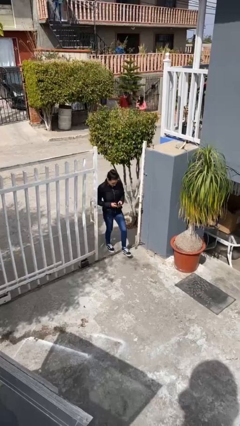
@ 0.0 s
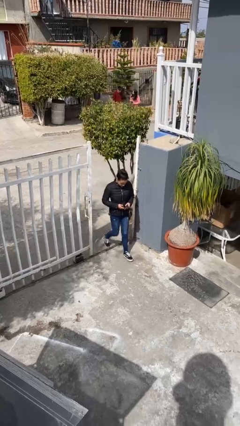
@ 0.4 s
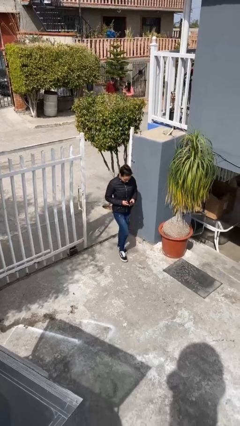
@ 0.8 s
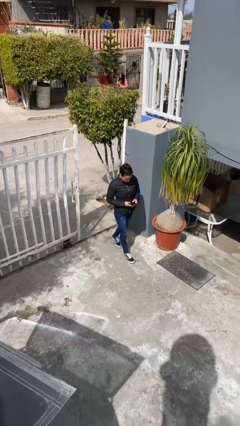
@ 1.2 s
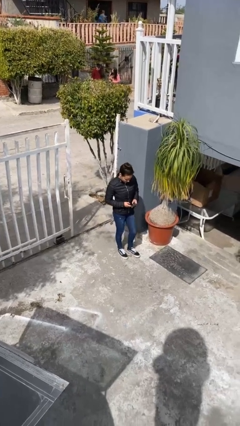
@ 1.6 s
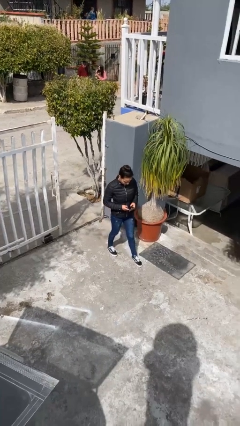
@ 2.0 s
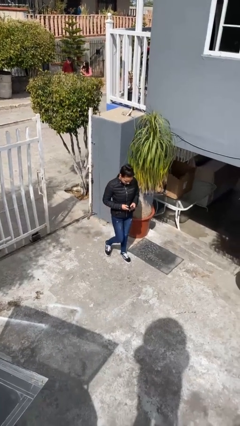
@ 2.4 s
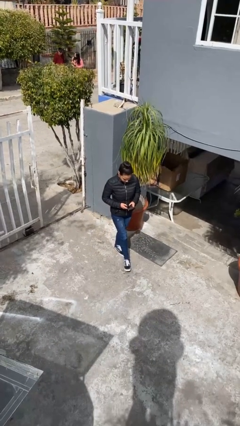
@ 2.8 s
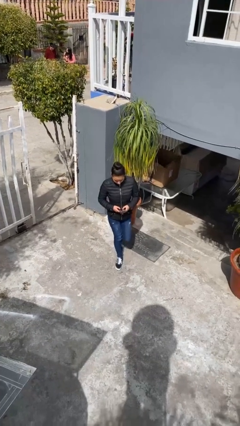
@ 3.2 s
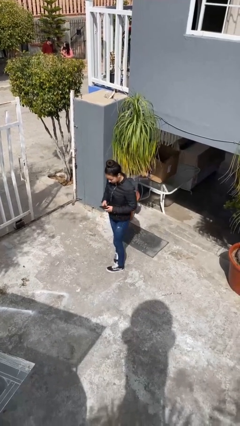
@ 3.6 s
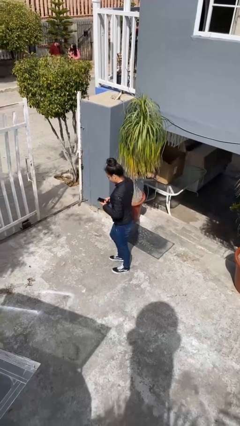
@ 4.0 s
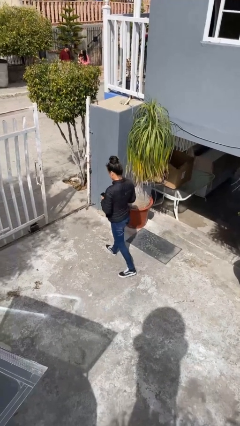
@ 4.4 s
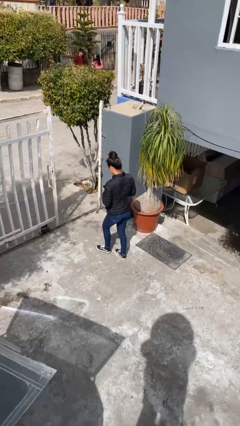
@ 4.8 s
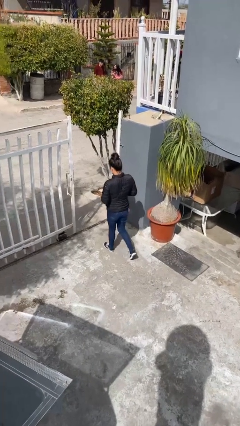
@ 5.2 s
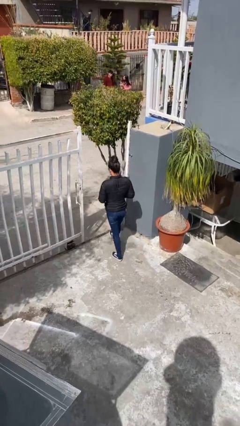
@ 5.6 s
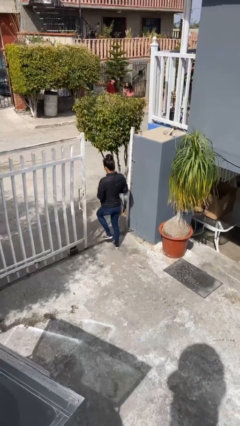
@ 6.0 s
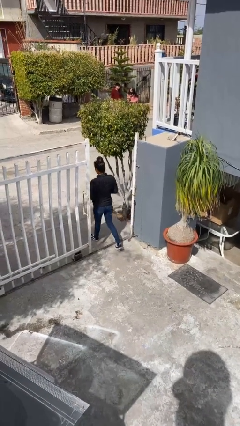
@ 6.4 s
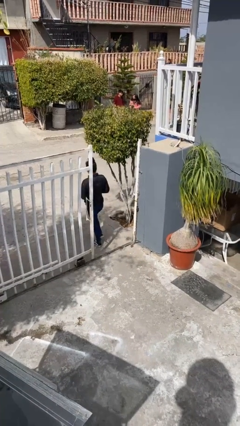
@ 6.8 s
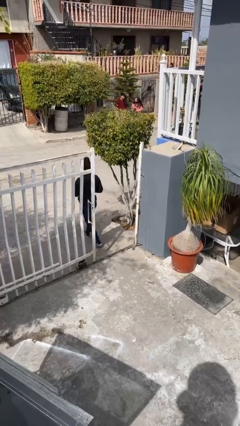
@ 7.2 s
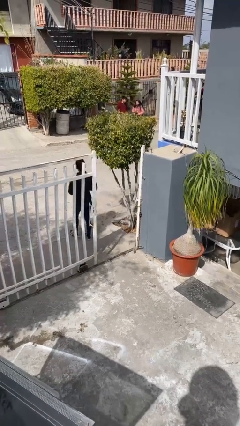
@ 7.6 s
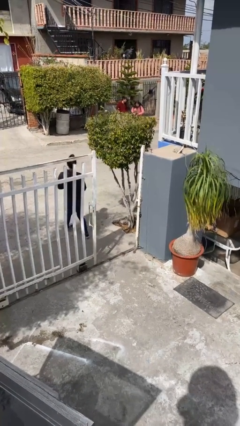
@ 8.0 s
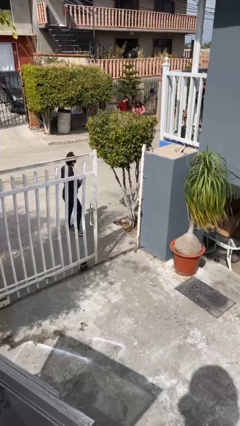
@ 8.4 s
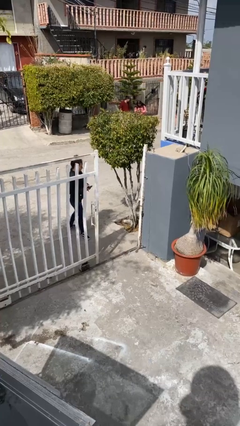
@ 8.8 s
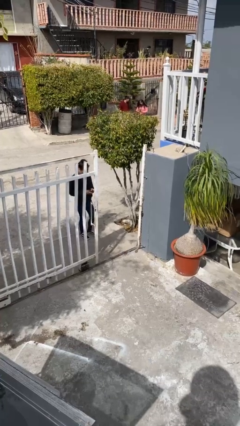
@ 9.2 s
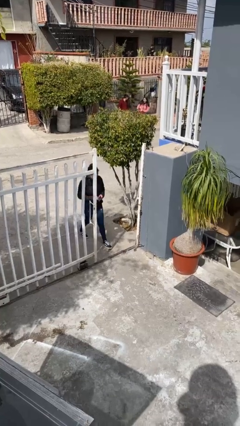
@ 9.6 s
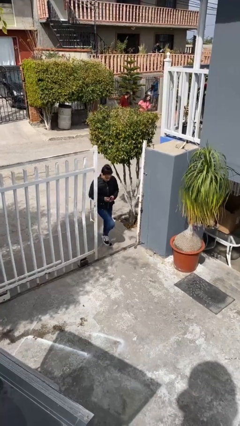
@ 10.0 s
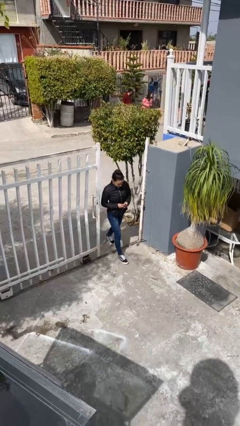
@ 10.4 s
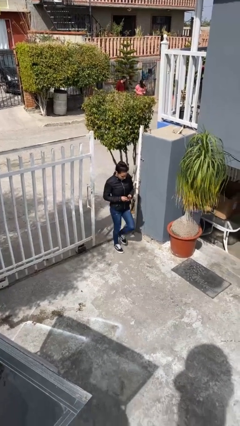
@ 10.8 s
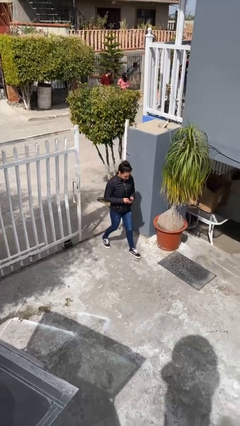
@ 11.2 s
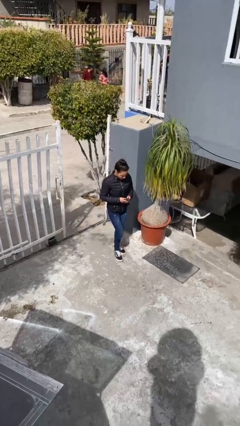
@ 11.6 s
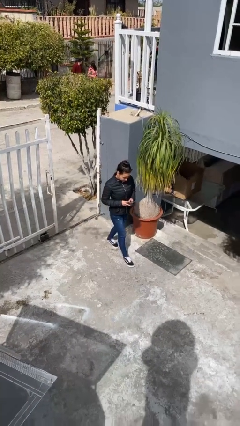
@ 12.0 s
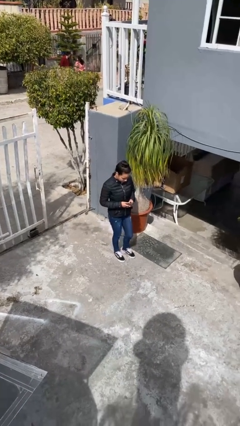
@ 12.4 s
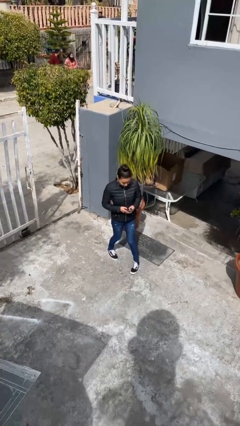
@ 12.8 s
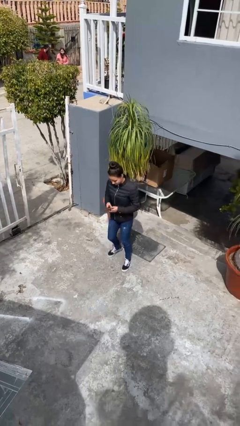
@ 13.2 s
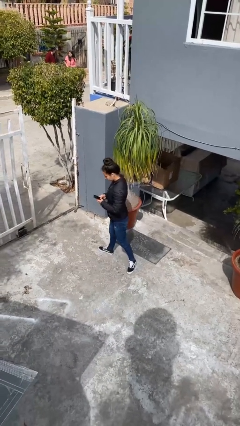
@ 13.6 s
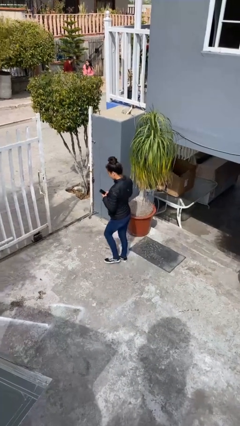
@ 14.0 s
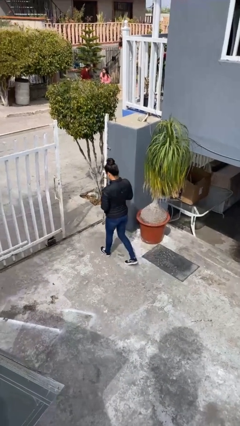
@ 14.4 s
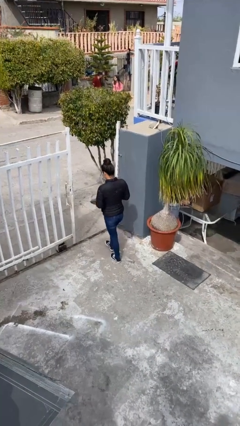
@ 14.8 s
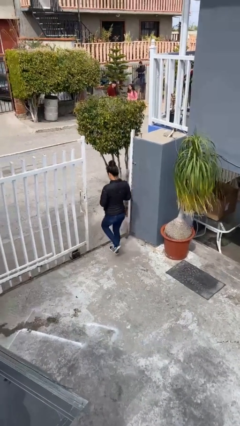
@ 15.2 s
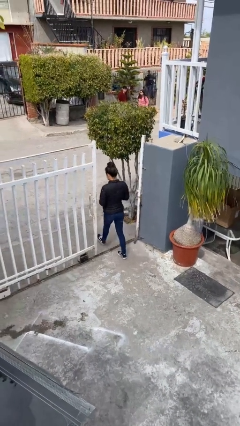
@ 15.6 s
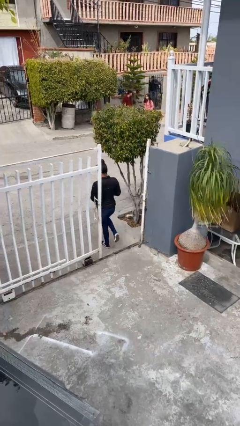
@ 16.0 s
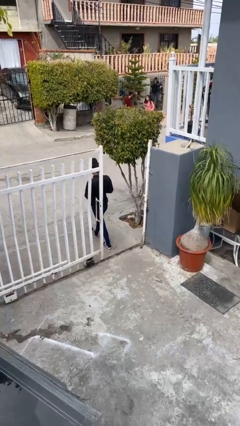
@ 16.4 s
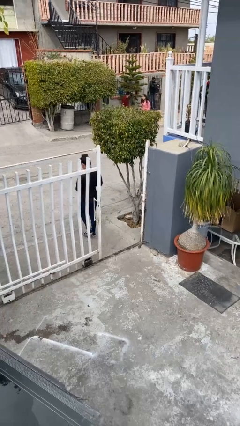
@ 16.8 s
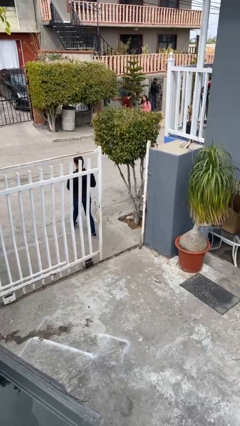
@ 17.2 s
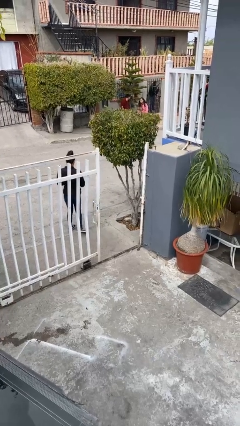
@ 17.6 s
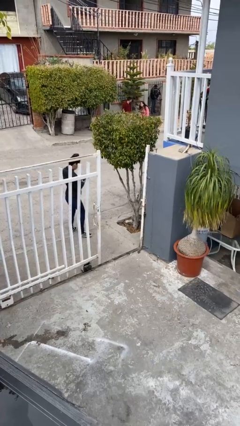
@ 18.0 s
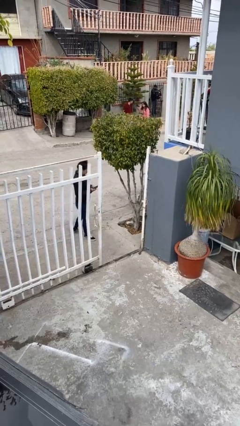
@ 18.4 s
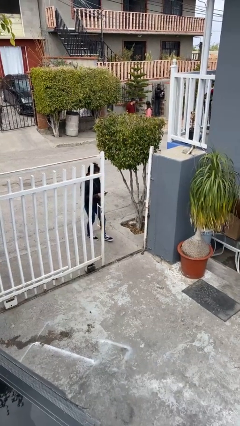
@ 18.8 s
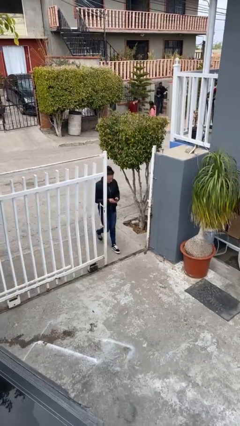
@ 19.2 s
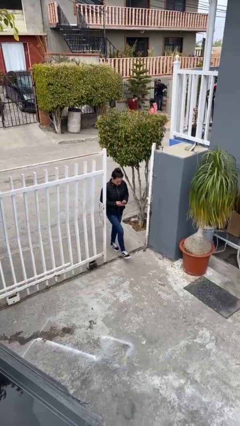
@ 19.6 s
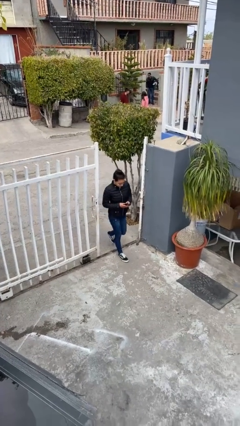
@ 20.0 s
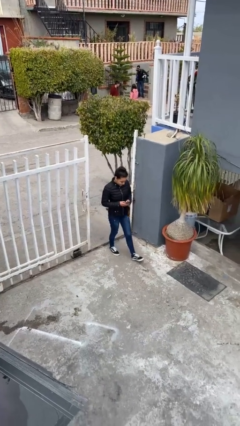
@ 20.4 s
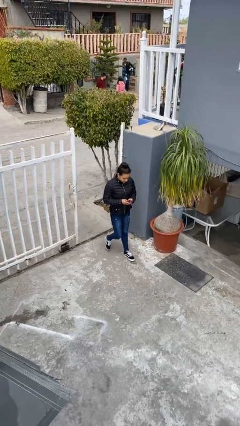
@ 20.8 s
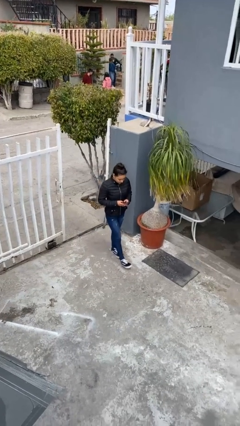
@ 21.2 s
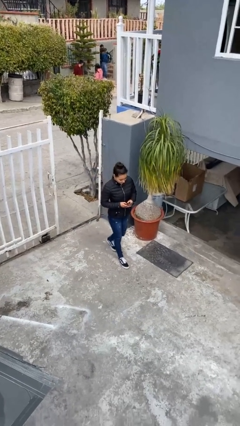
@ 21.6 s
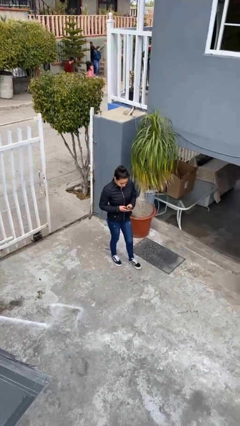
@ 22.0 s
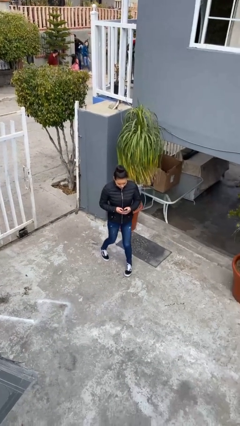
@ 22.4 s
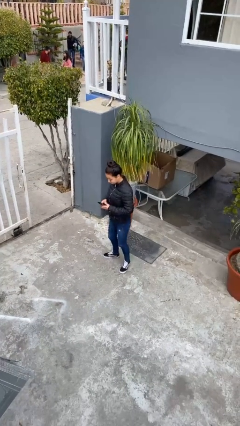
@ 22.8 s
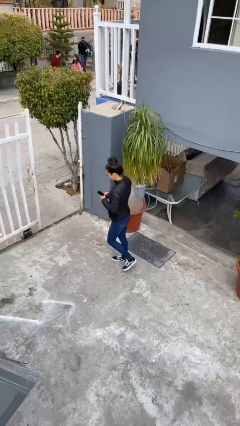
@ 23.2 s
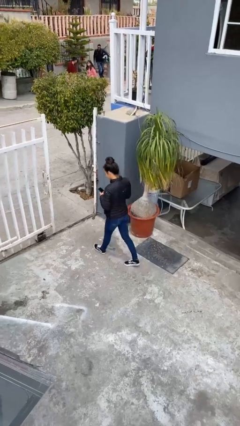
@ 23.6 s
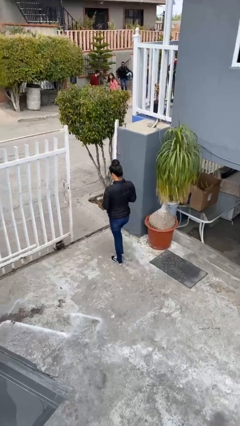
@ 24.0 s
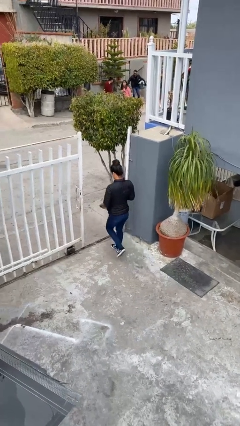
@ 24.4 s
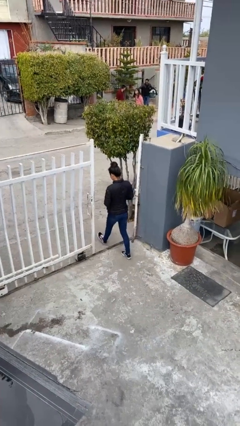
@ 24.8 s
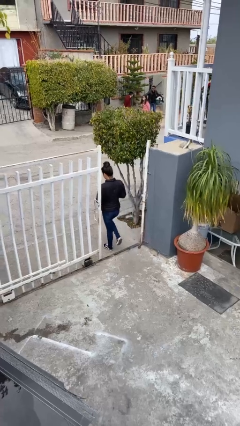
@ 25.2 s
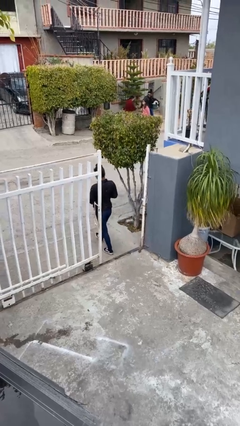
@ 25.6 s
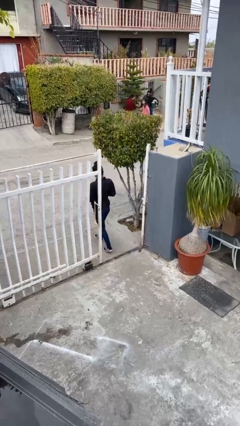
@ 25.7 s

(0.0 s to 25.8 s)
person texts on phone

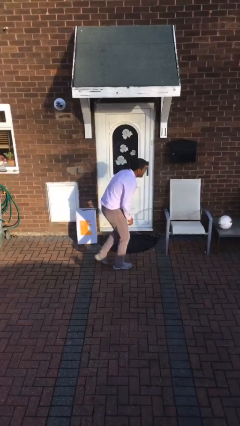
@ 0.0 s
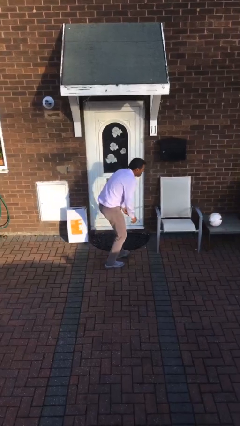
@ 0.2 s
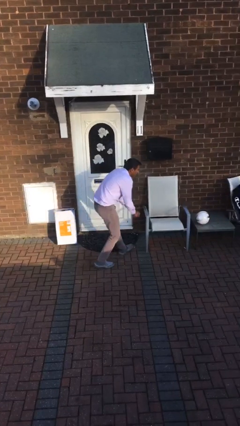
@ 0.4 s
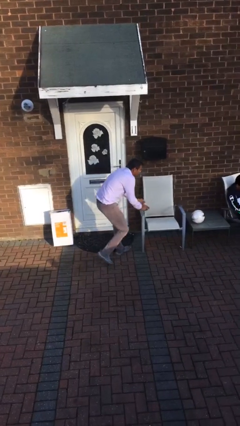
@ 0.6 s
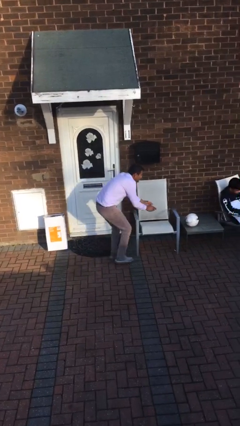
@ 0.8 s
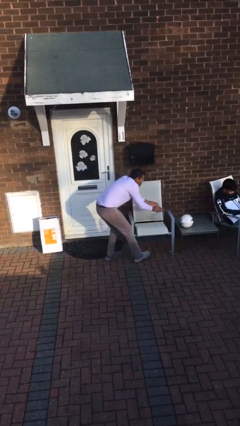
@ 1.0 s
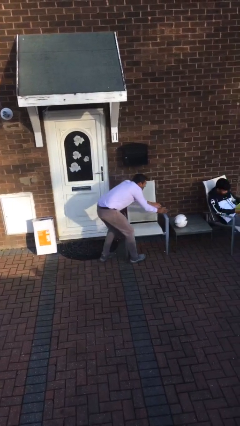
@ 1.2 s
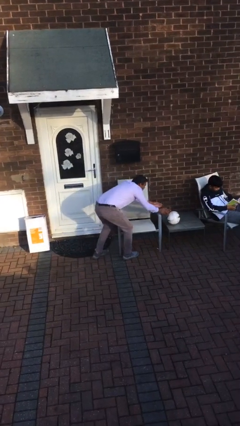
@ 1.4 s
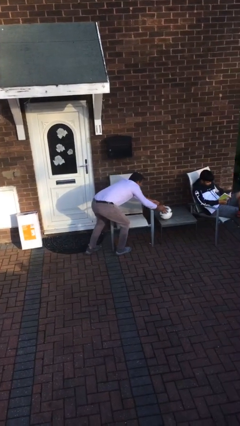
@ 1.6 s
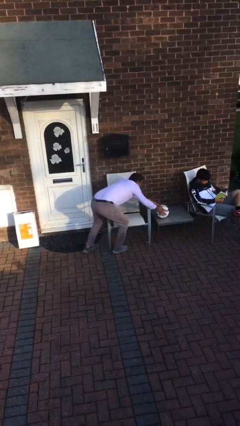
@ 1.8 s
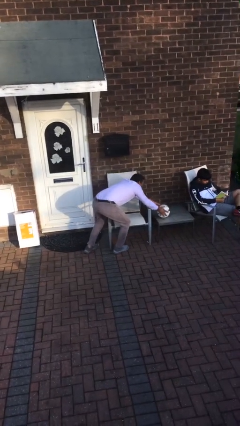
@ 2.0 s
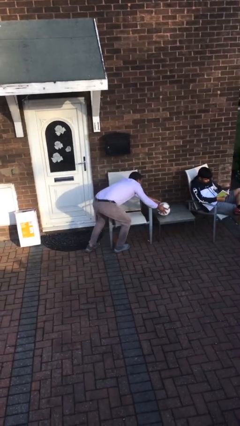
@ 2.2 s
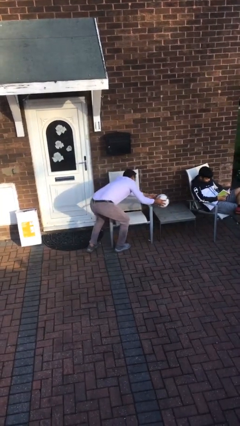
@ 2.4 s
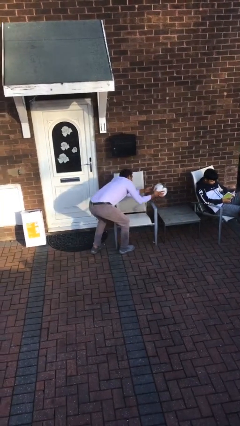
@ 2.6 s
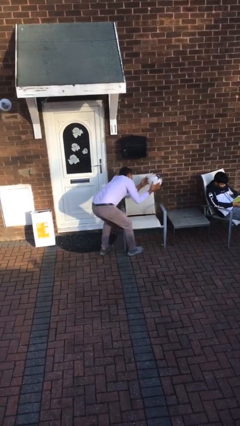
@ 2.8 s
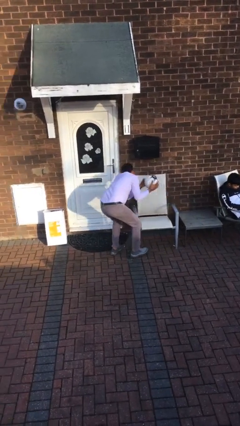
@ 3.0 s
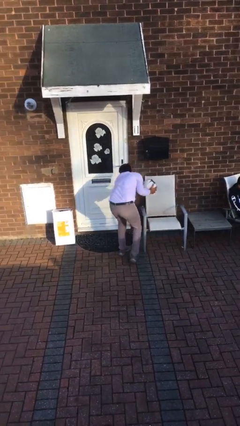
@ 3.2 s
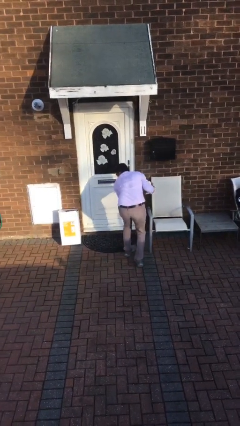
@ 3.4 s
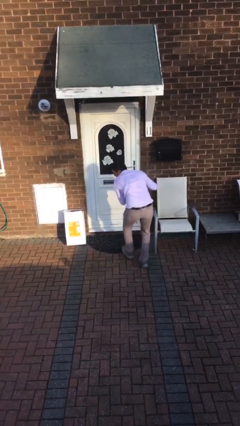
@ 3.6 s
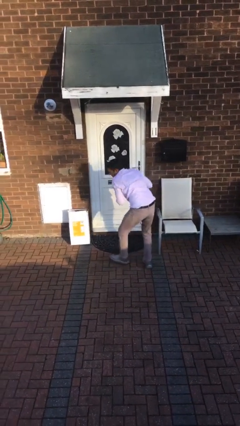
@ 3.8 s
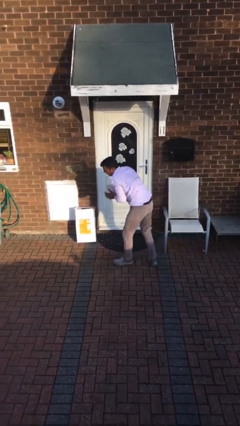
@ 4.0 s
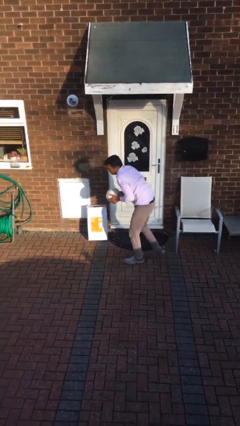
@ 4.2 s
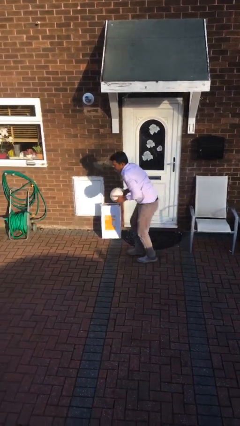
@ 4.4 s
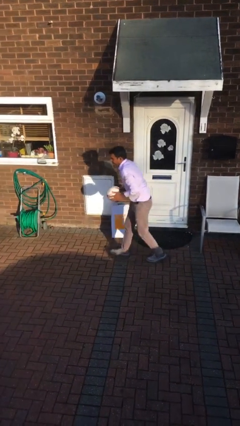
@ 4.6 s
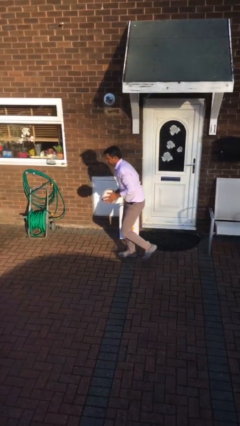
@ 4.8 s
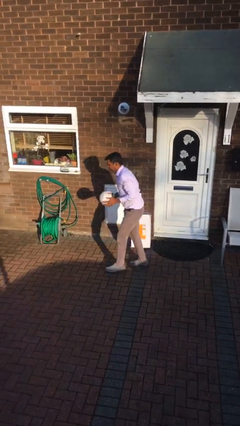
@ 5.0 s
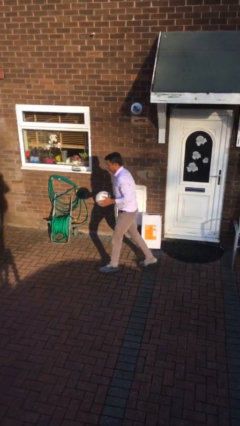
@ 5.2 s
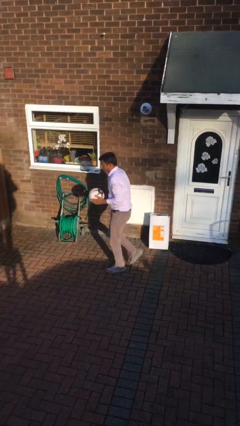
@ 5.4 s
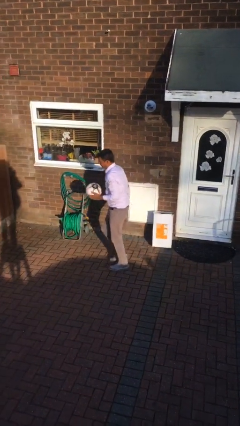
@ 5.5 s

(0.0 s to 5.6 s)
person steals object from person
